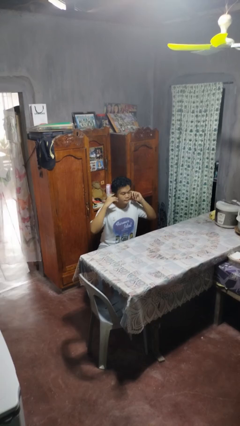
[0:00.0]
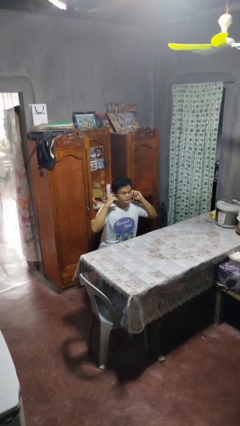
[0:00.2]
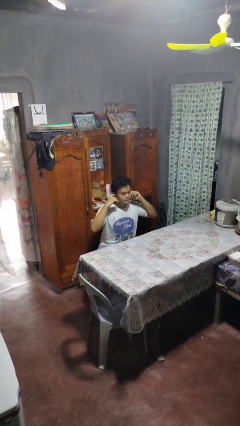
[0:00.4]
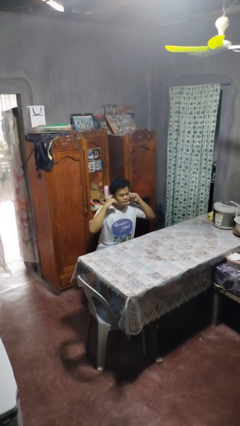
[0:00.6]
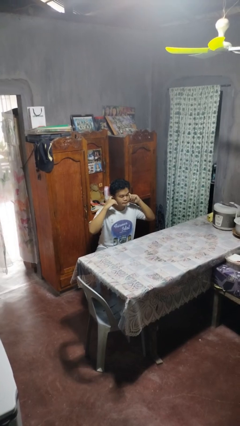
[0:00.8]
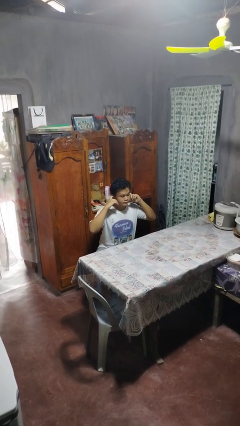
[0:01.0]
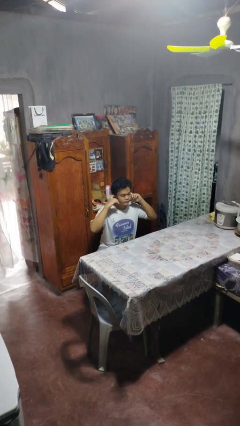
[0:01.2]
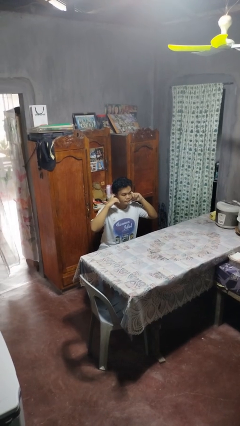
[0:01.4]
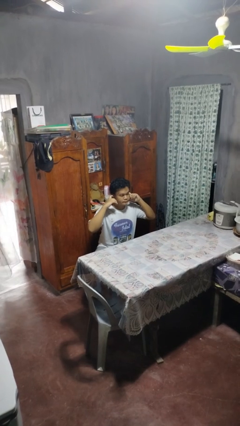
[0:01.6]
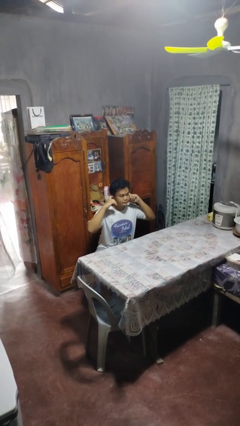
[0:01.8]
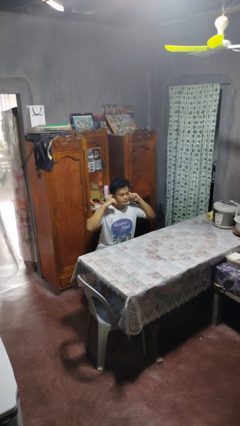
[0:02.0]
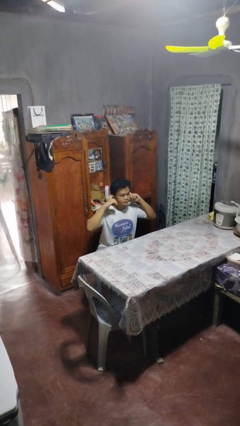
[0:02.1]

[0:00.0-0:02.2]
person puts fingers in ear

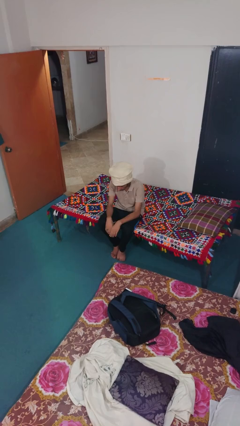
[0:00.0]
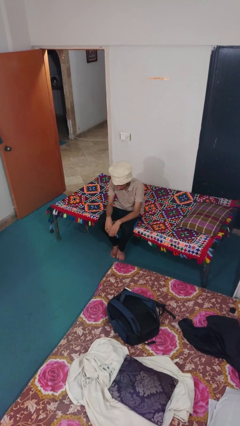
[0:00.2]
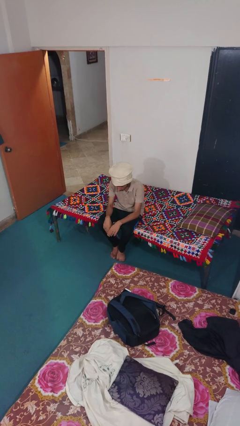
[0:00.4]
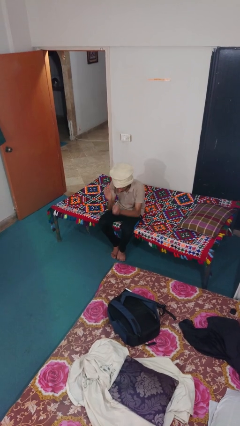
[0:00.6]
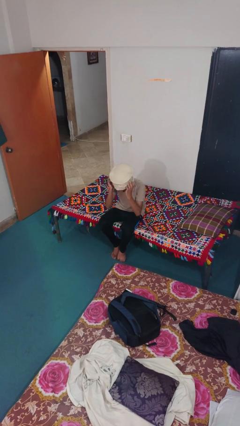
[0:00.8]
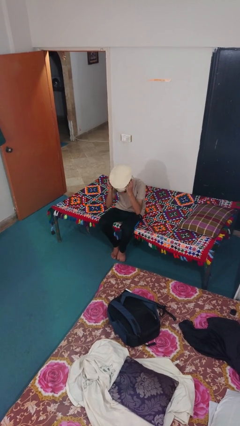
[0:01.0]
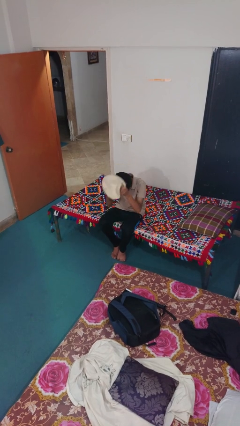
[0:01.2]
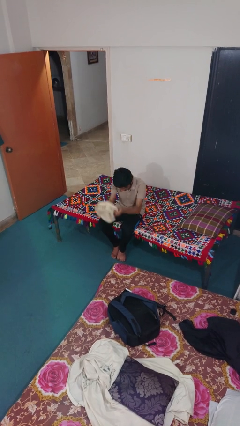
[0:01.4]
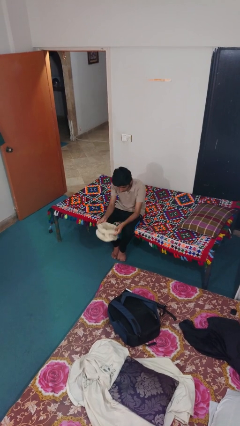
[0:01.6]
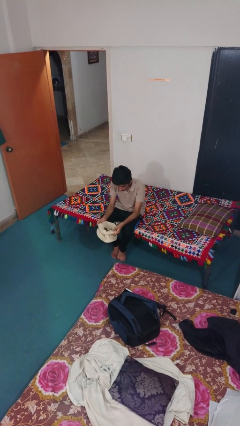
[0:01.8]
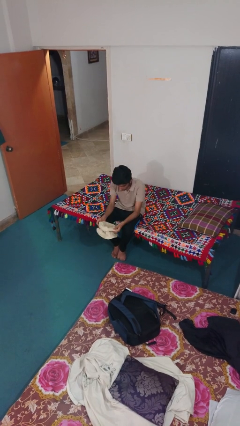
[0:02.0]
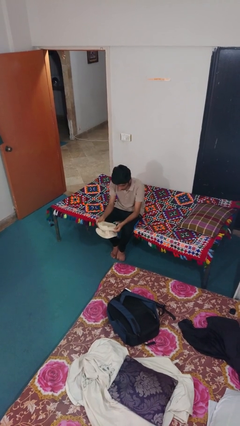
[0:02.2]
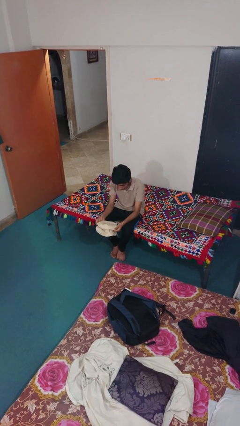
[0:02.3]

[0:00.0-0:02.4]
person takes off hat

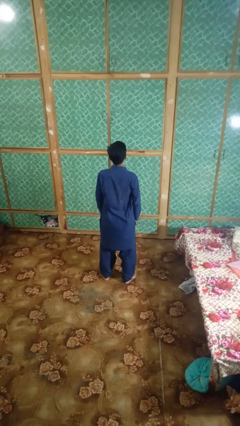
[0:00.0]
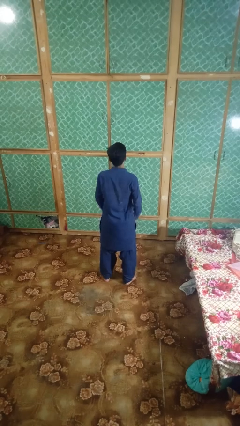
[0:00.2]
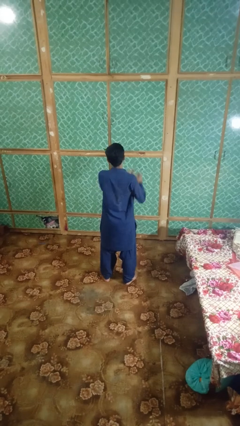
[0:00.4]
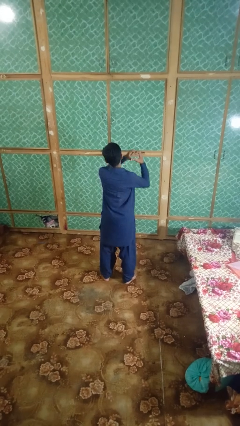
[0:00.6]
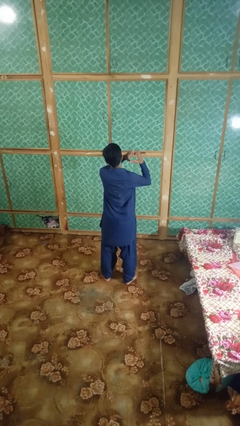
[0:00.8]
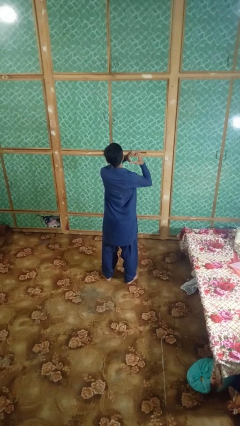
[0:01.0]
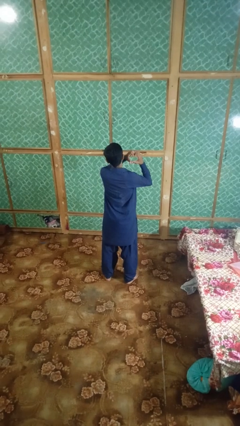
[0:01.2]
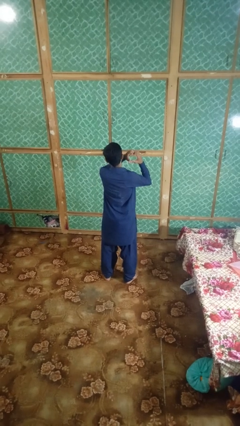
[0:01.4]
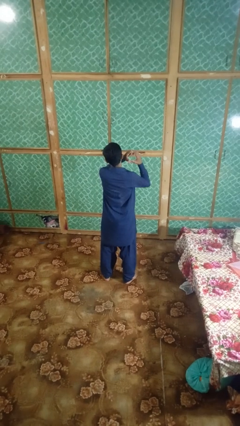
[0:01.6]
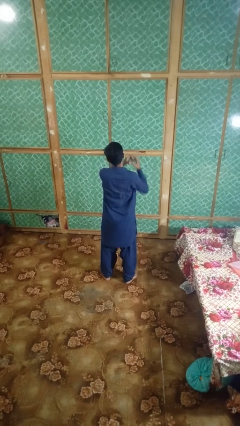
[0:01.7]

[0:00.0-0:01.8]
person gestures heart

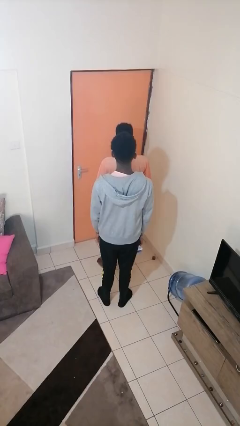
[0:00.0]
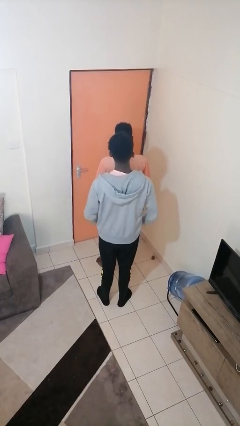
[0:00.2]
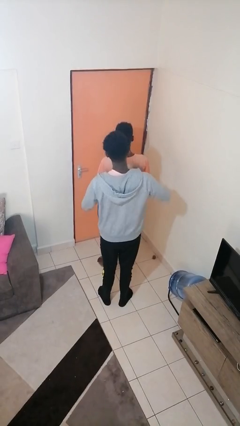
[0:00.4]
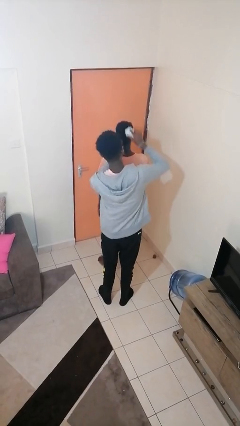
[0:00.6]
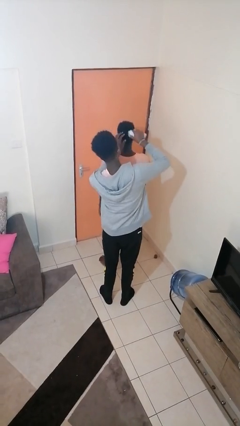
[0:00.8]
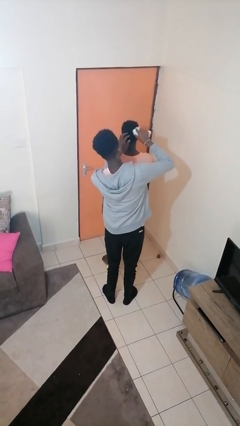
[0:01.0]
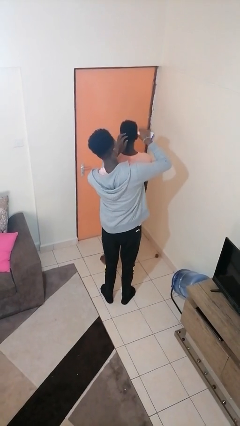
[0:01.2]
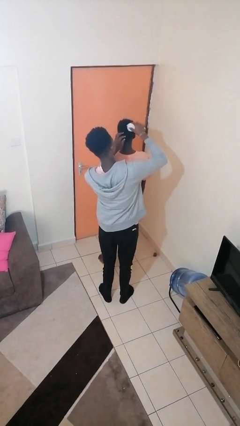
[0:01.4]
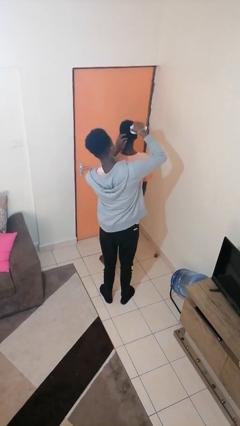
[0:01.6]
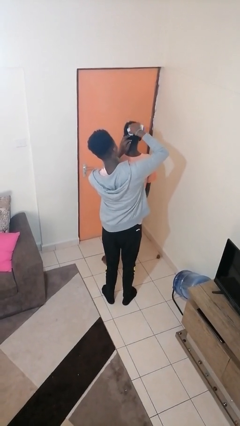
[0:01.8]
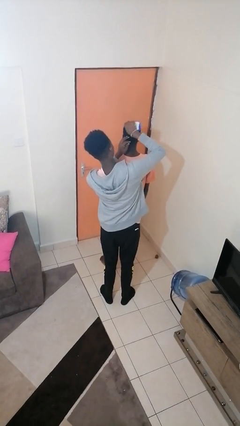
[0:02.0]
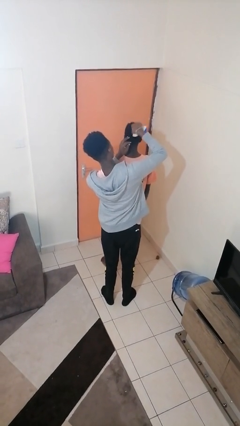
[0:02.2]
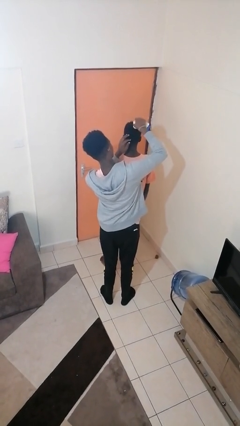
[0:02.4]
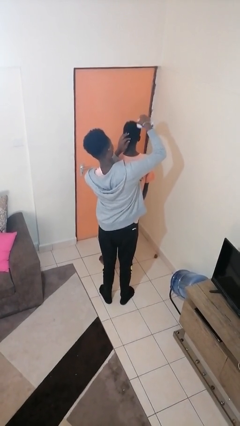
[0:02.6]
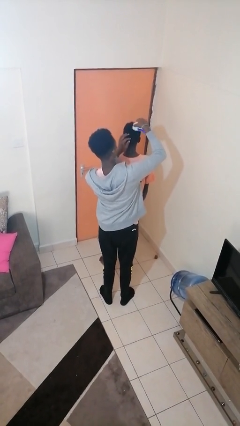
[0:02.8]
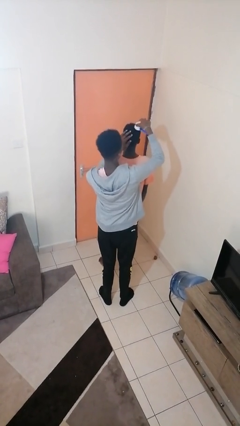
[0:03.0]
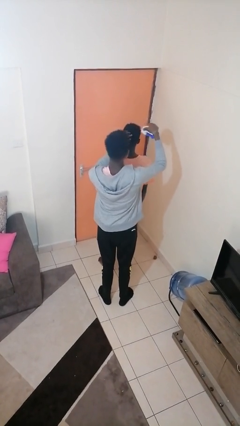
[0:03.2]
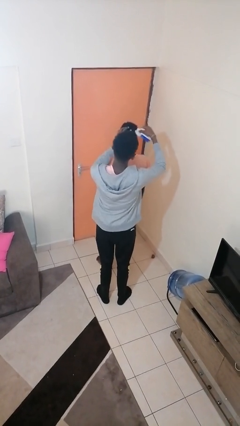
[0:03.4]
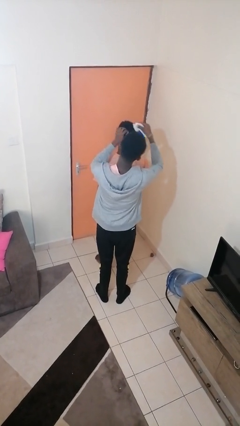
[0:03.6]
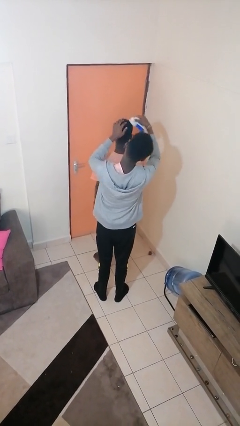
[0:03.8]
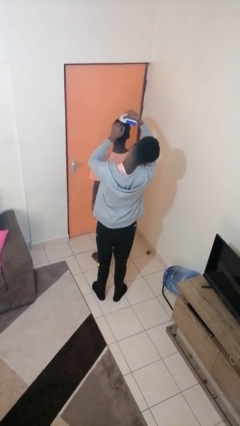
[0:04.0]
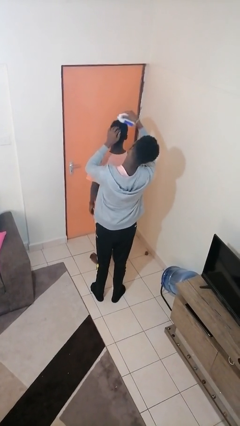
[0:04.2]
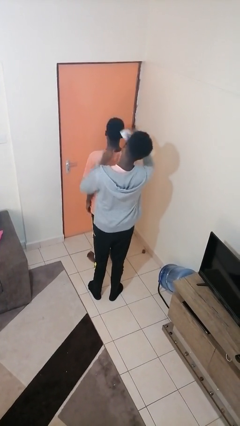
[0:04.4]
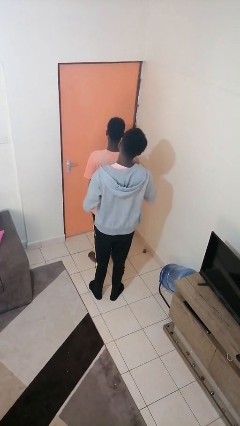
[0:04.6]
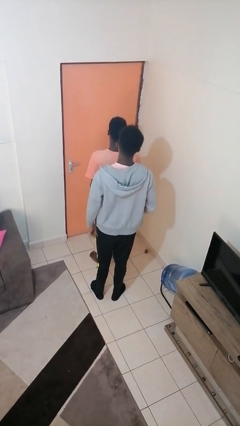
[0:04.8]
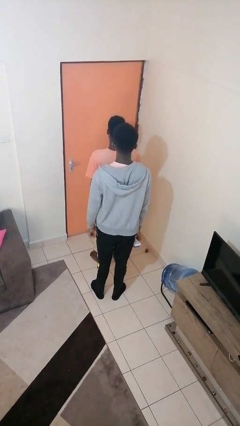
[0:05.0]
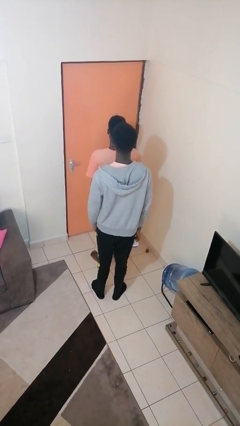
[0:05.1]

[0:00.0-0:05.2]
person brushes hair of person

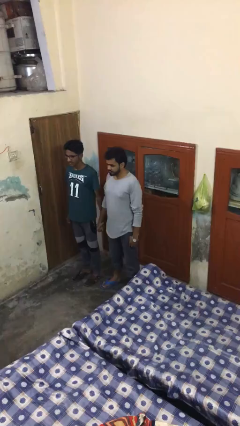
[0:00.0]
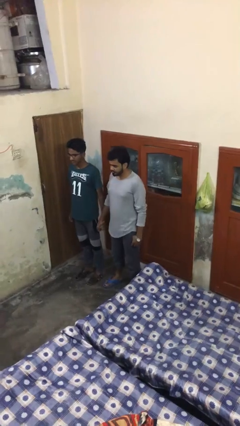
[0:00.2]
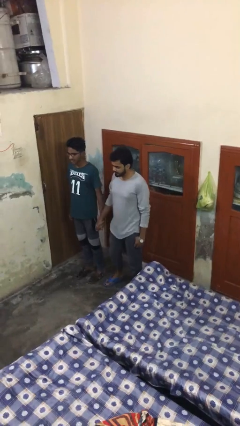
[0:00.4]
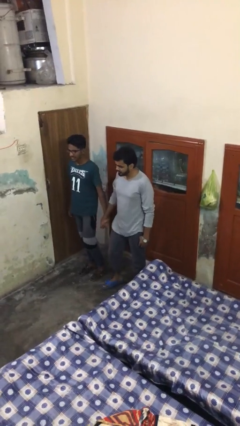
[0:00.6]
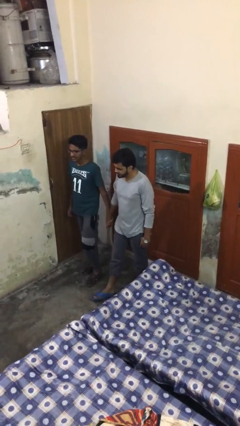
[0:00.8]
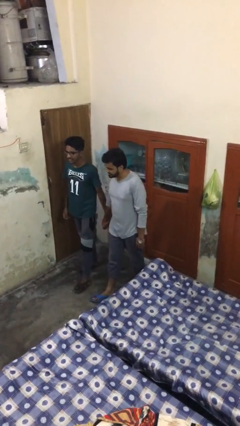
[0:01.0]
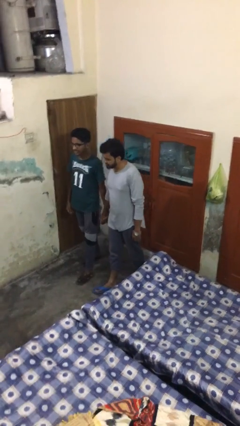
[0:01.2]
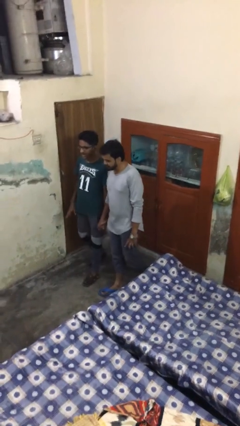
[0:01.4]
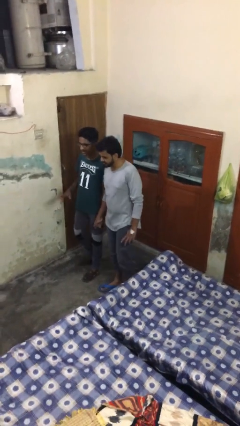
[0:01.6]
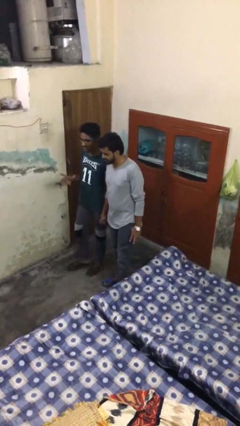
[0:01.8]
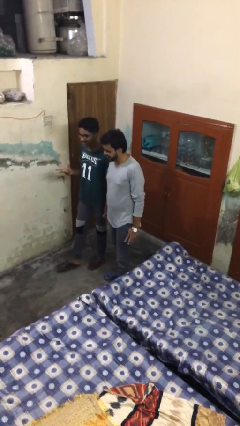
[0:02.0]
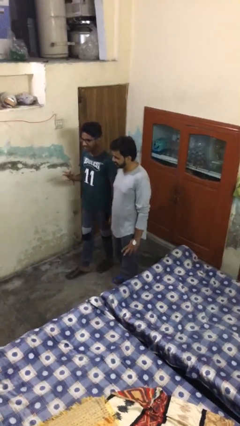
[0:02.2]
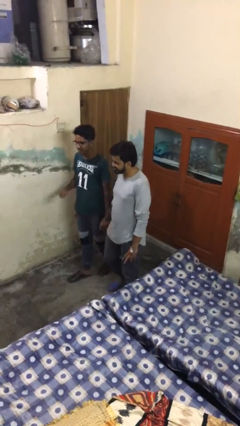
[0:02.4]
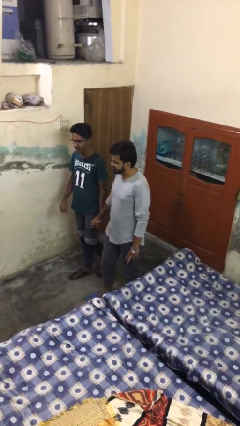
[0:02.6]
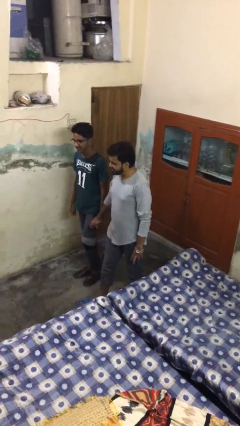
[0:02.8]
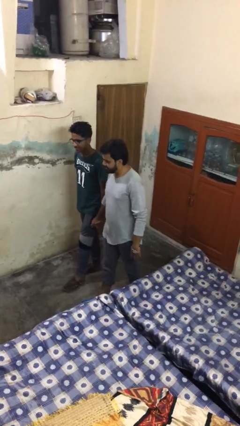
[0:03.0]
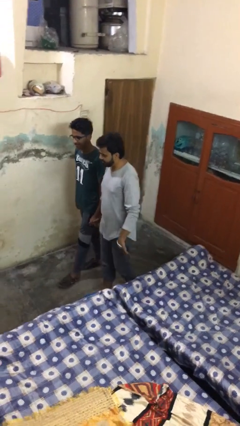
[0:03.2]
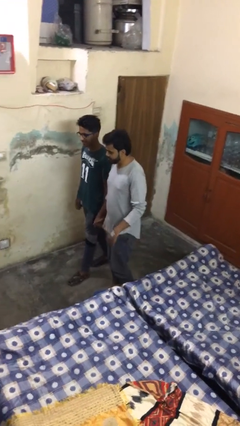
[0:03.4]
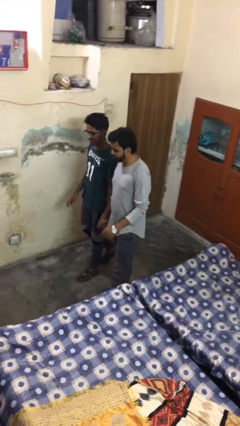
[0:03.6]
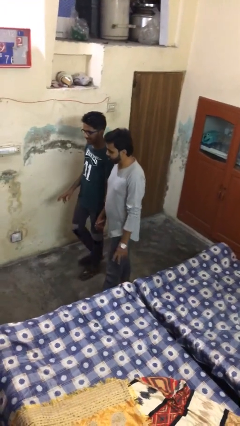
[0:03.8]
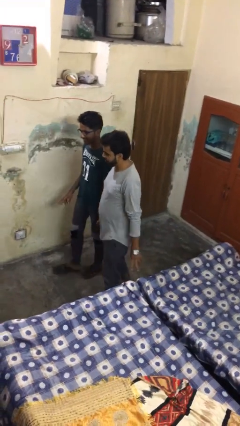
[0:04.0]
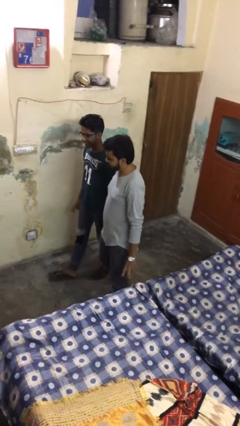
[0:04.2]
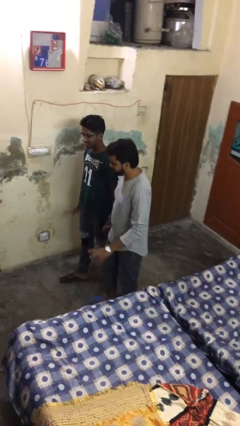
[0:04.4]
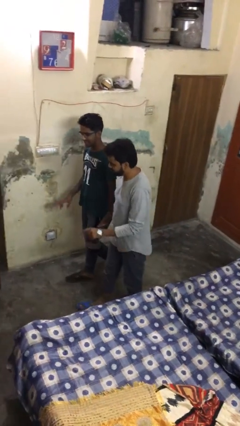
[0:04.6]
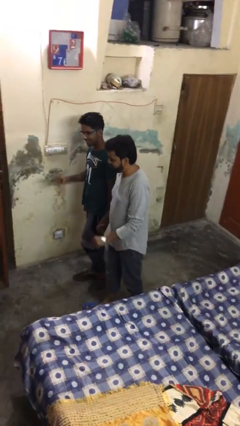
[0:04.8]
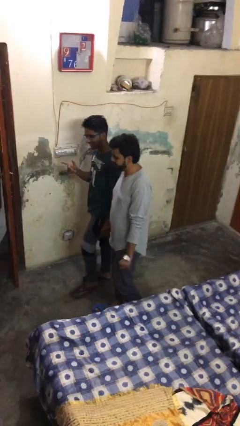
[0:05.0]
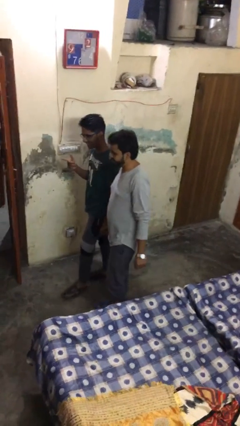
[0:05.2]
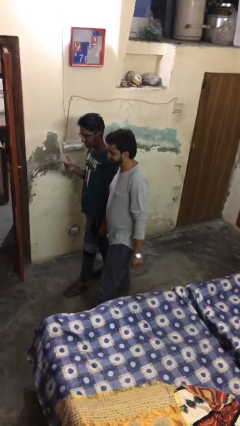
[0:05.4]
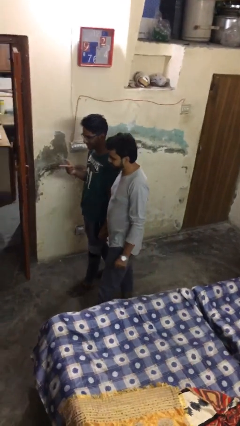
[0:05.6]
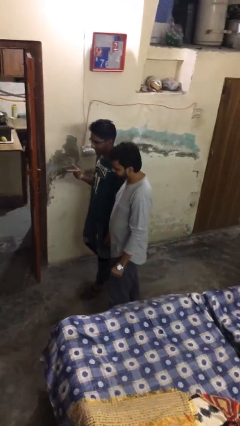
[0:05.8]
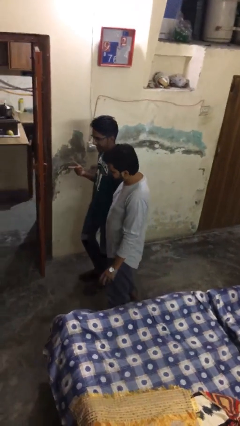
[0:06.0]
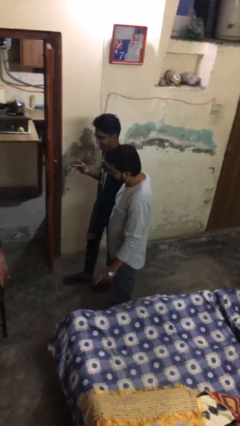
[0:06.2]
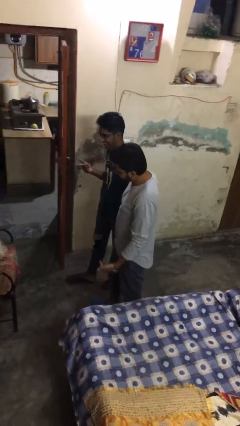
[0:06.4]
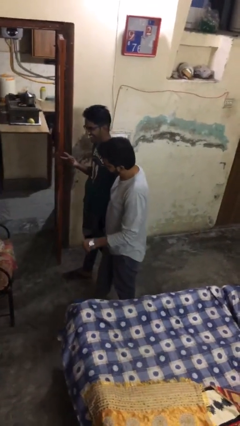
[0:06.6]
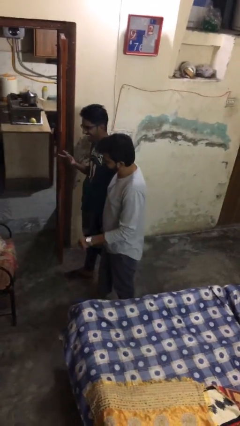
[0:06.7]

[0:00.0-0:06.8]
person holds hand
